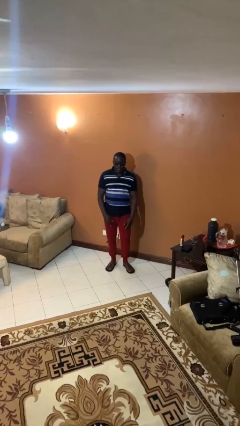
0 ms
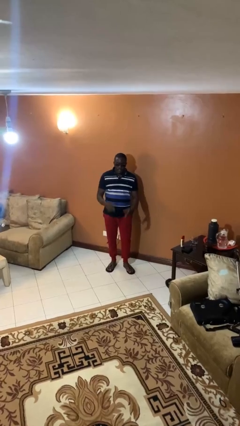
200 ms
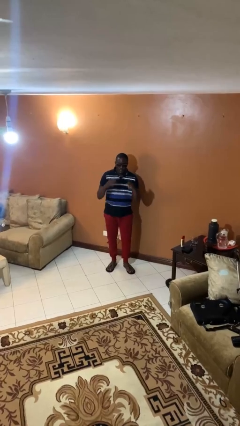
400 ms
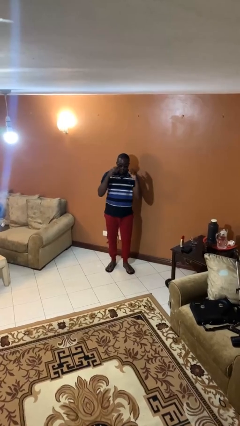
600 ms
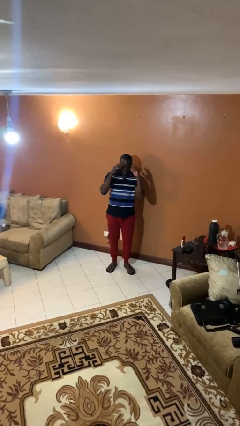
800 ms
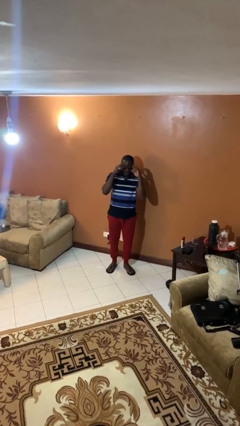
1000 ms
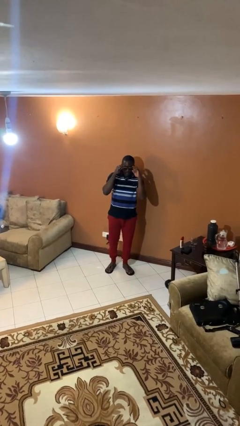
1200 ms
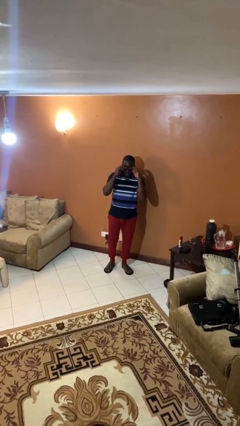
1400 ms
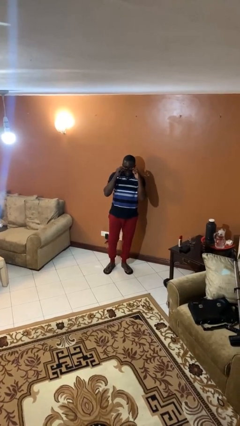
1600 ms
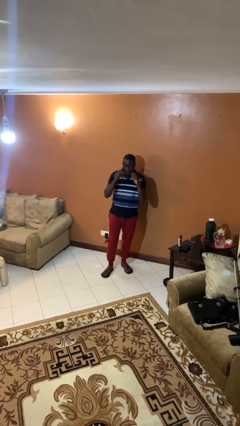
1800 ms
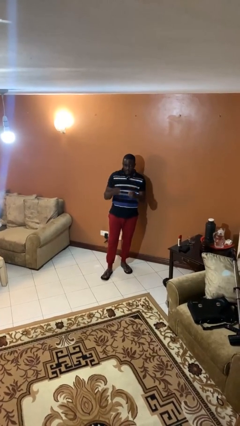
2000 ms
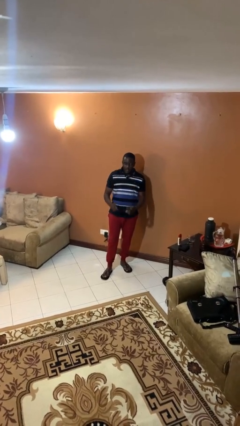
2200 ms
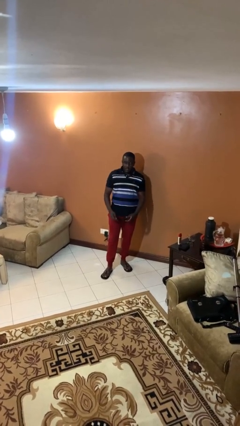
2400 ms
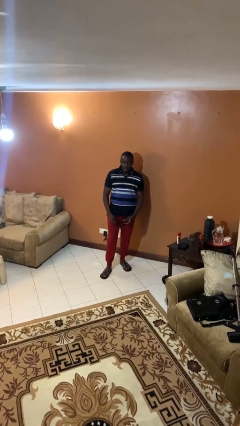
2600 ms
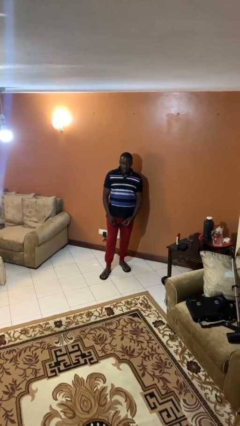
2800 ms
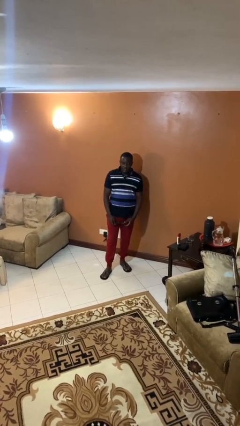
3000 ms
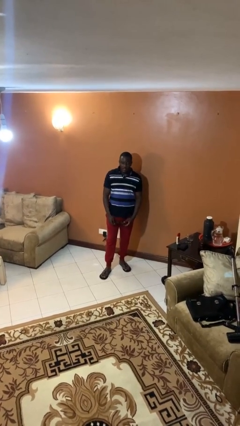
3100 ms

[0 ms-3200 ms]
person takes off sunglasses

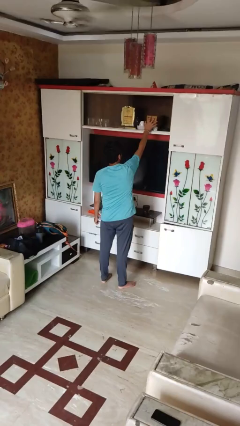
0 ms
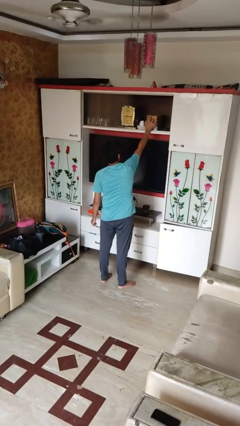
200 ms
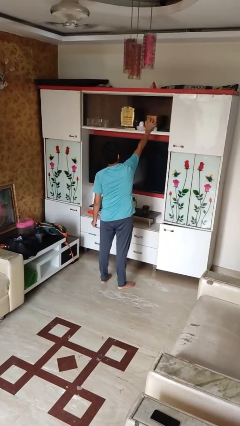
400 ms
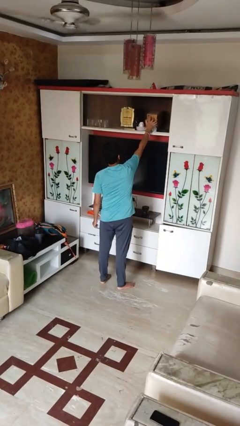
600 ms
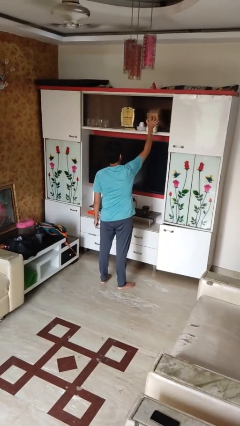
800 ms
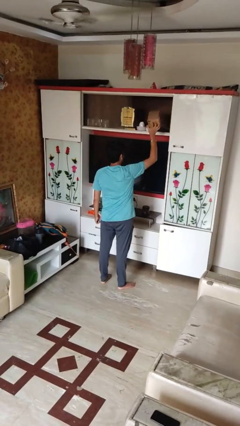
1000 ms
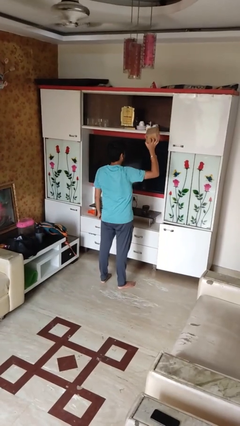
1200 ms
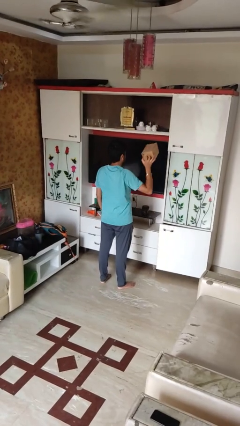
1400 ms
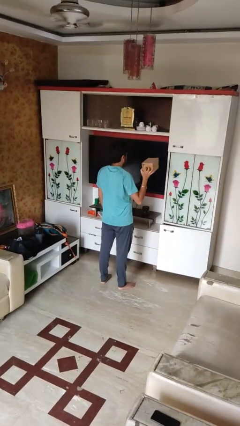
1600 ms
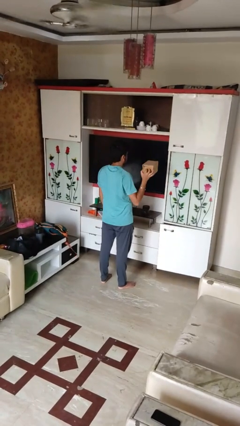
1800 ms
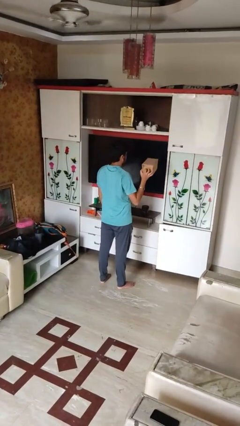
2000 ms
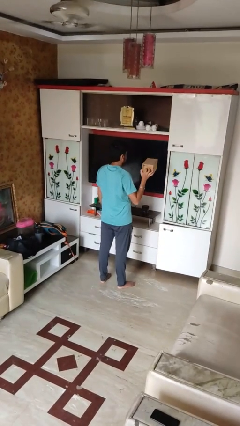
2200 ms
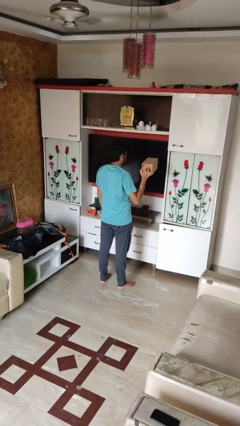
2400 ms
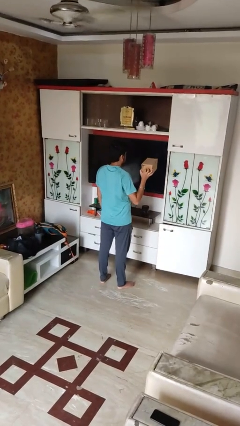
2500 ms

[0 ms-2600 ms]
person picks up object from shelf

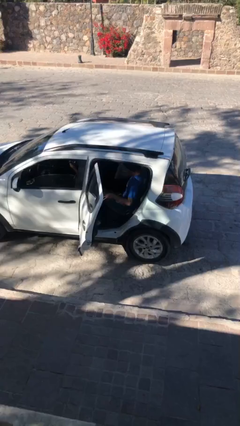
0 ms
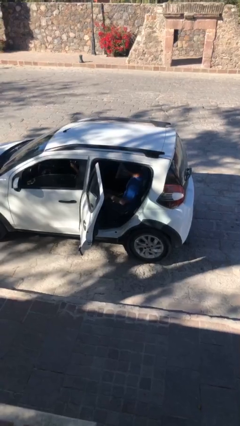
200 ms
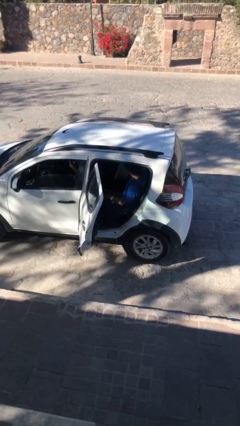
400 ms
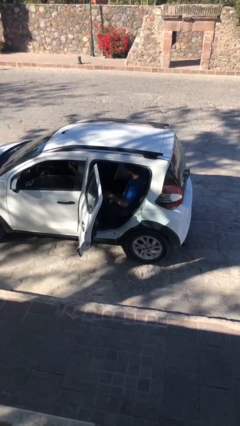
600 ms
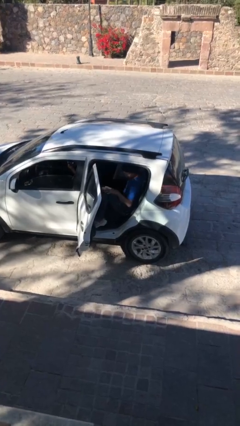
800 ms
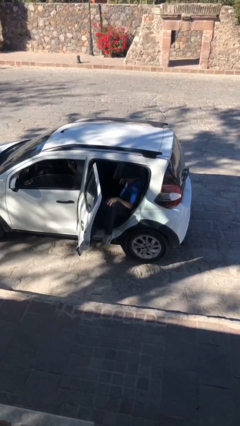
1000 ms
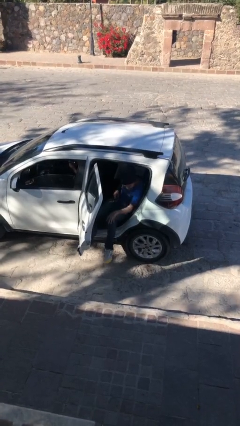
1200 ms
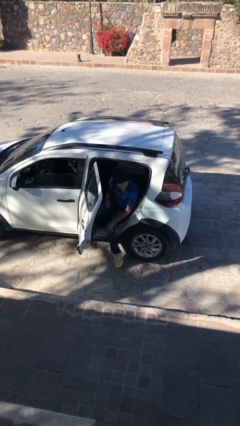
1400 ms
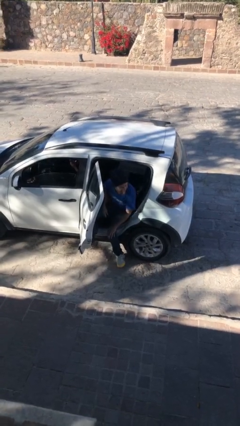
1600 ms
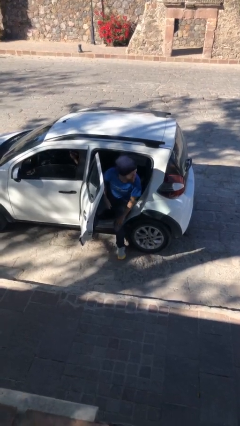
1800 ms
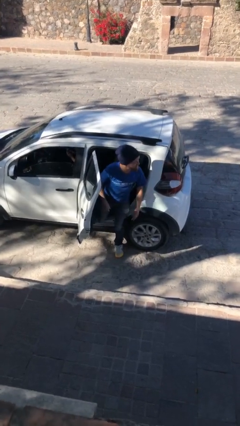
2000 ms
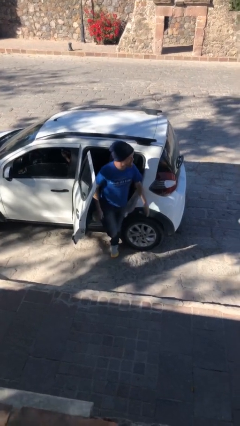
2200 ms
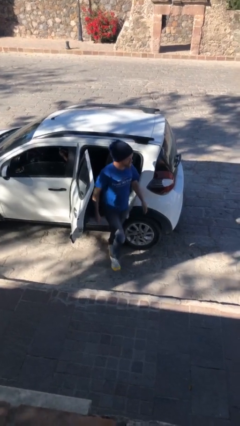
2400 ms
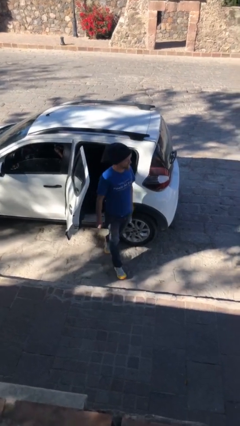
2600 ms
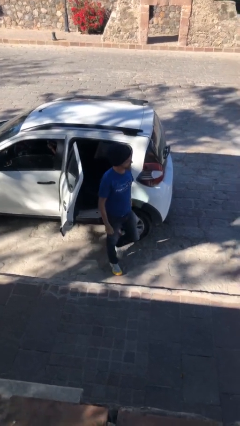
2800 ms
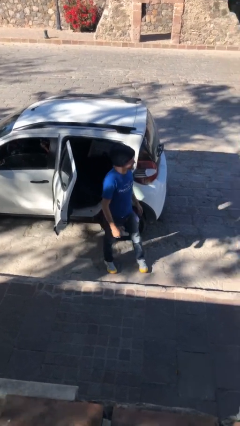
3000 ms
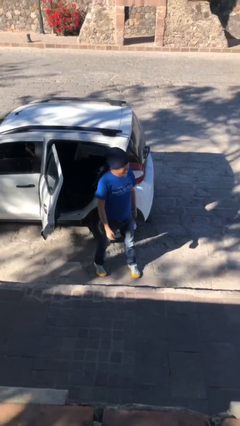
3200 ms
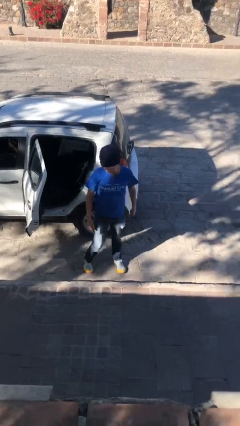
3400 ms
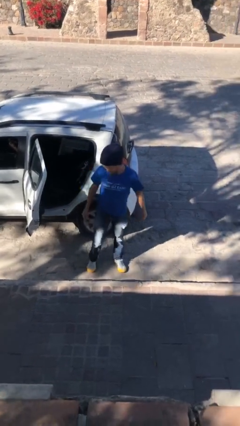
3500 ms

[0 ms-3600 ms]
person exits car

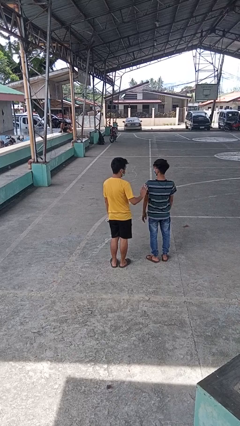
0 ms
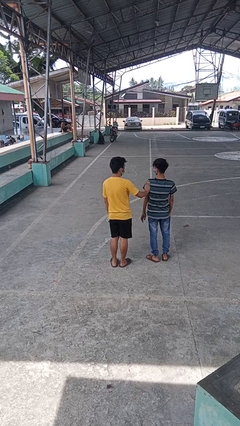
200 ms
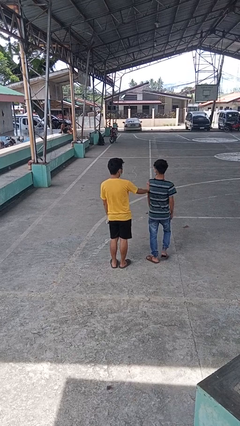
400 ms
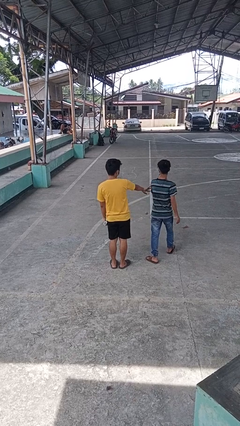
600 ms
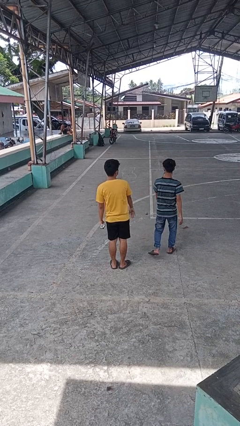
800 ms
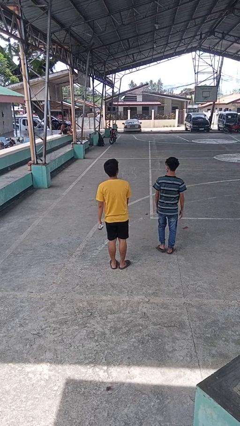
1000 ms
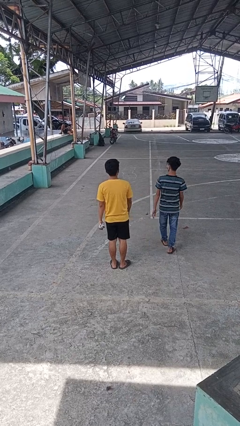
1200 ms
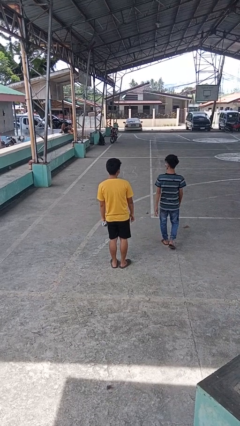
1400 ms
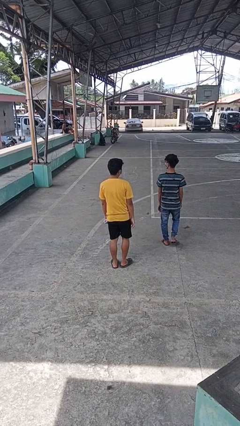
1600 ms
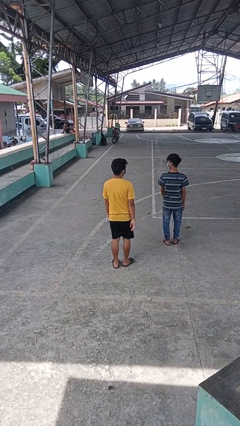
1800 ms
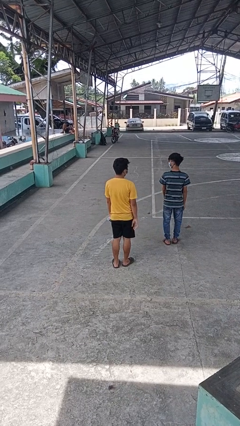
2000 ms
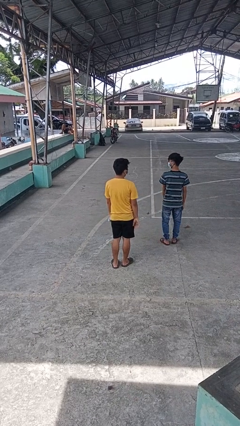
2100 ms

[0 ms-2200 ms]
person shoves person

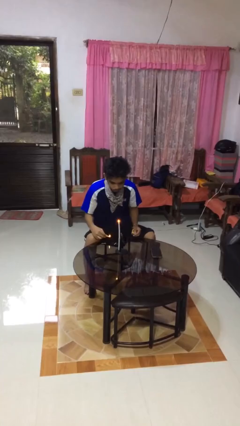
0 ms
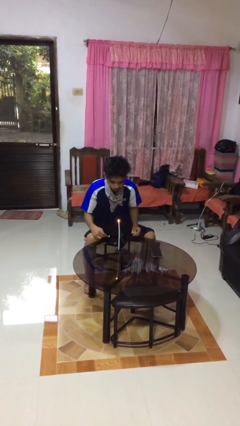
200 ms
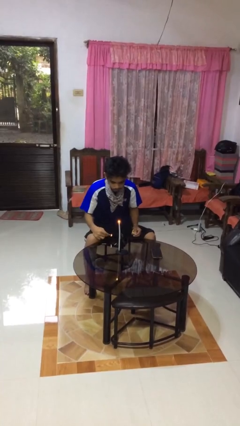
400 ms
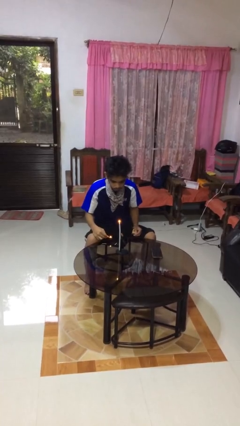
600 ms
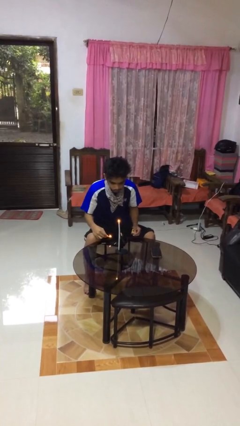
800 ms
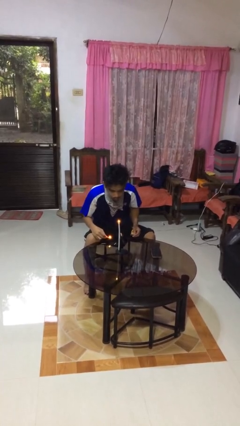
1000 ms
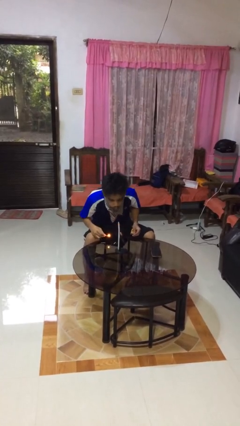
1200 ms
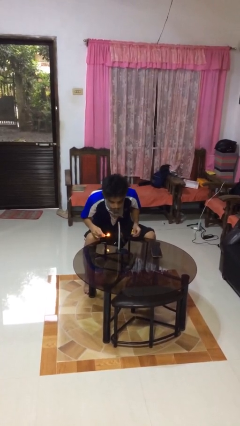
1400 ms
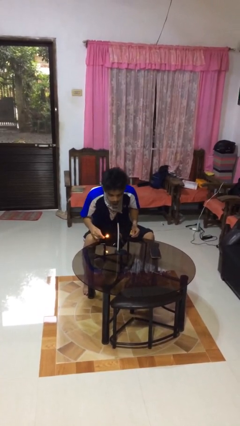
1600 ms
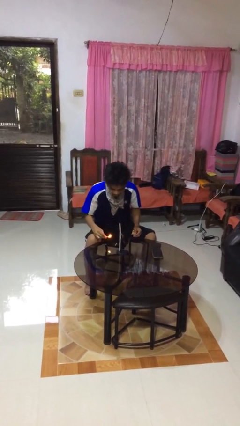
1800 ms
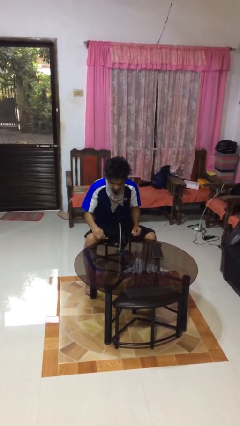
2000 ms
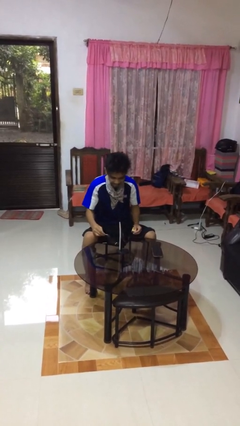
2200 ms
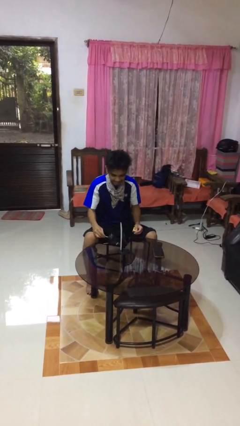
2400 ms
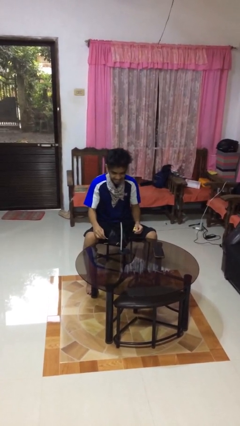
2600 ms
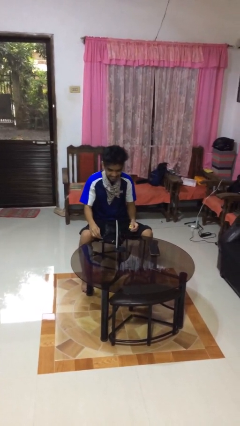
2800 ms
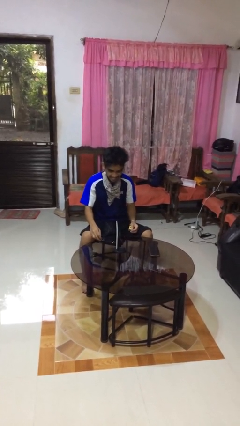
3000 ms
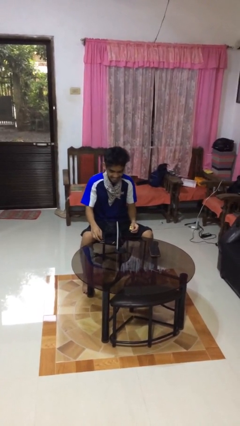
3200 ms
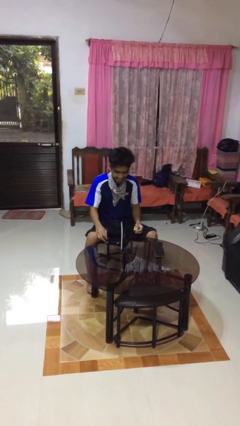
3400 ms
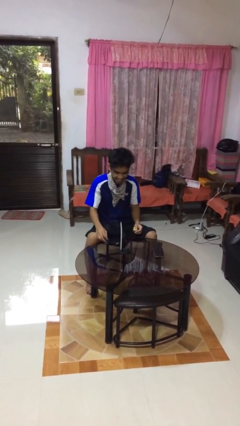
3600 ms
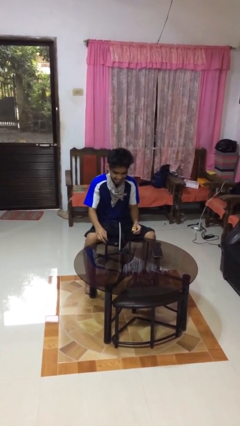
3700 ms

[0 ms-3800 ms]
person extinguishes candle

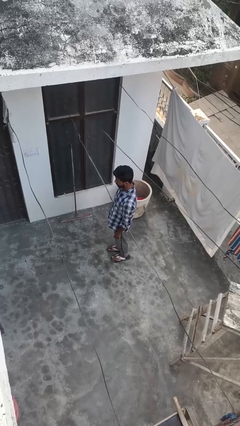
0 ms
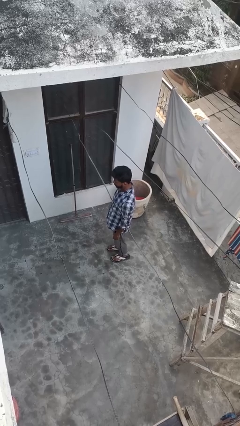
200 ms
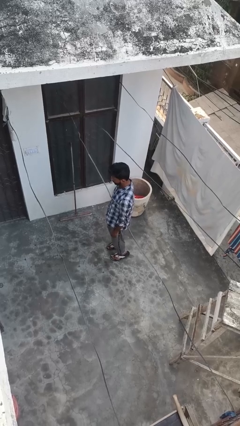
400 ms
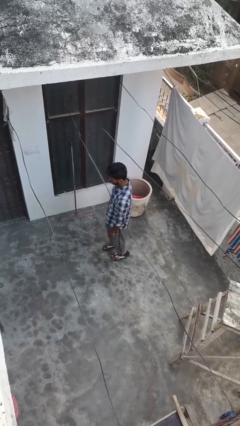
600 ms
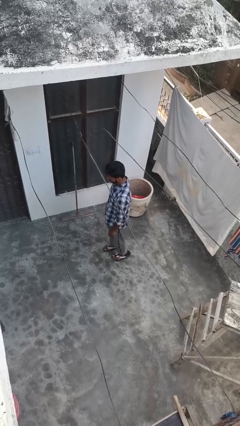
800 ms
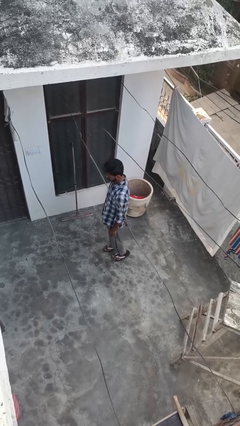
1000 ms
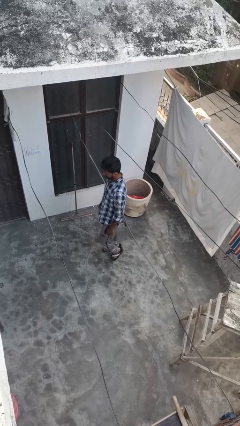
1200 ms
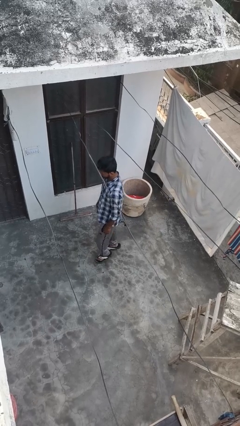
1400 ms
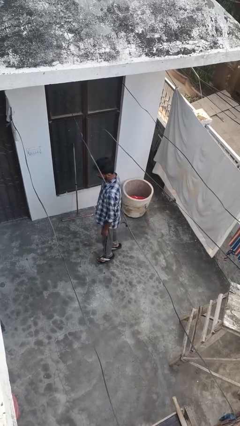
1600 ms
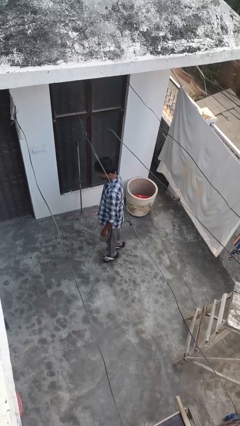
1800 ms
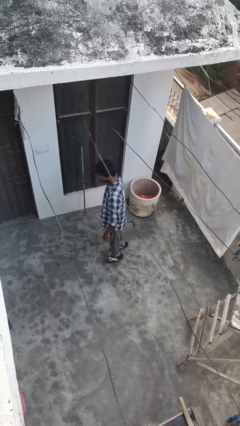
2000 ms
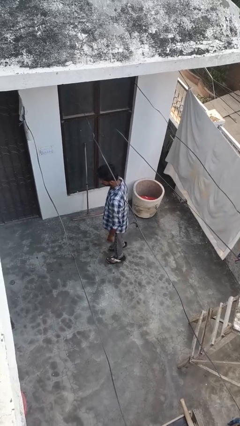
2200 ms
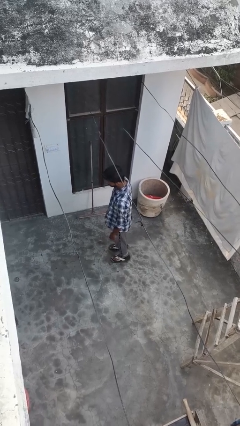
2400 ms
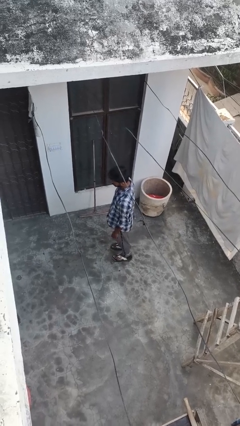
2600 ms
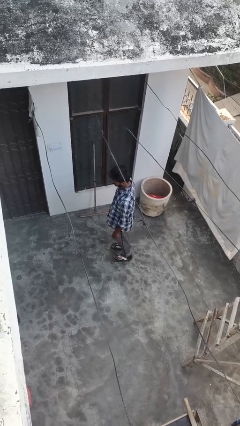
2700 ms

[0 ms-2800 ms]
person walks tiptoe
